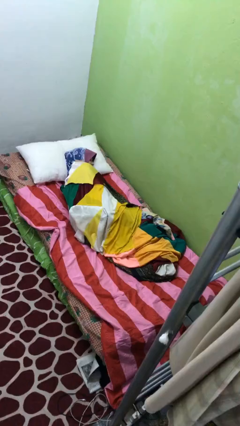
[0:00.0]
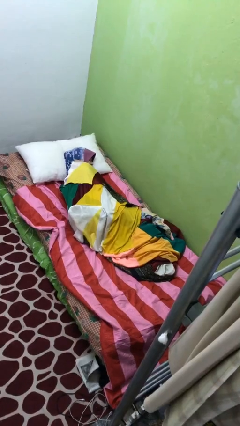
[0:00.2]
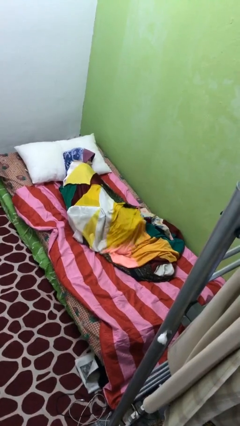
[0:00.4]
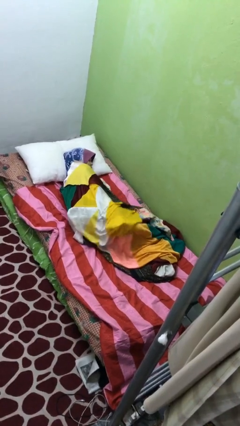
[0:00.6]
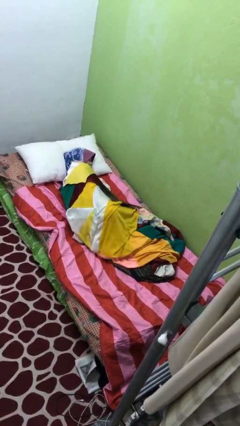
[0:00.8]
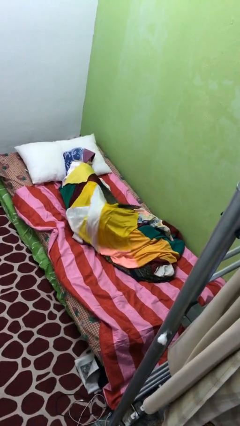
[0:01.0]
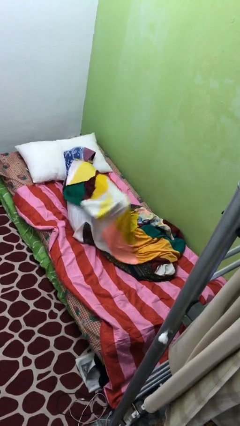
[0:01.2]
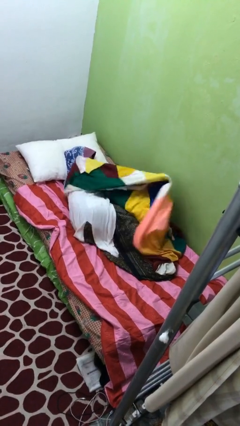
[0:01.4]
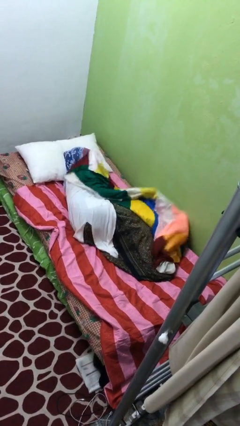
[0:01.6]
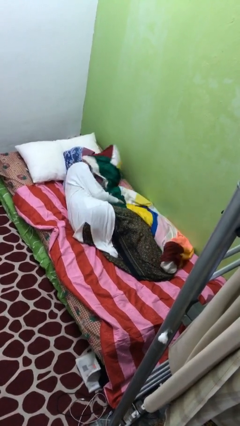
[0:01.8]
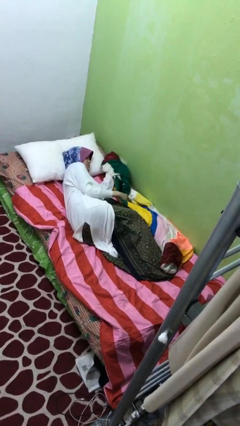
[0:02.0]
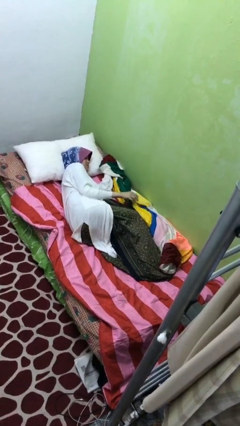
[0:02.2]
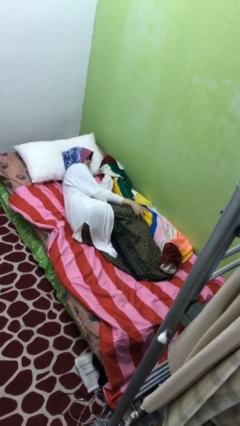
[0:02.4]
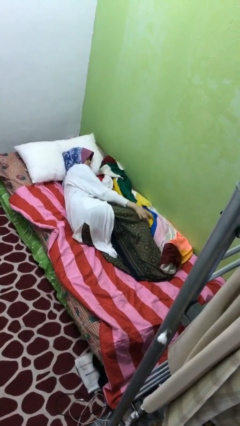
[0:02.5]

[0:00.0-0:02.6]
person uncovers with blanket

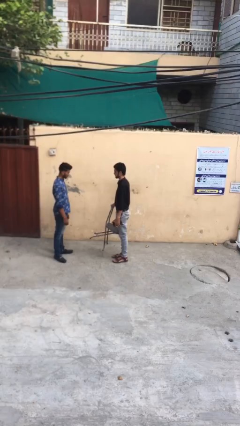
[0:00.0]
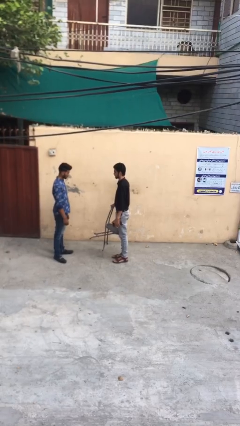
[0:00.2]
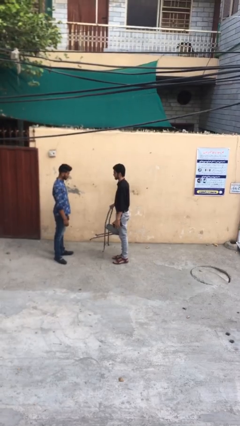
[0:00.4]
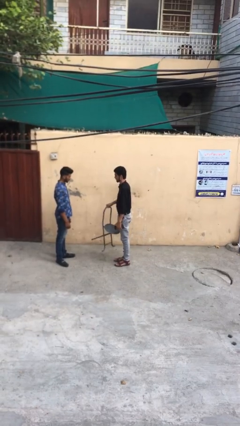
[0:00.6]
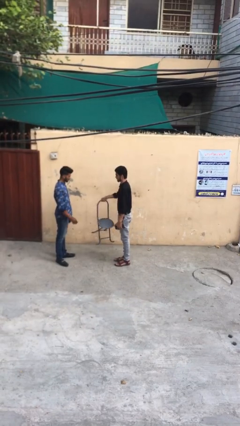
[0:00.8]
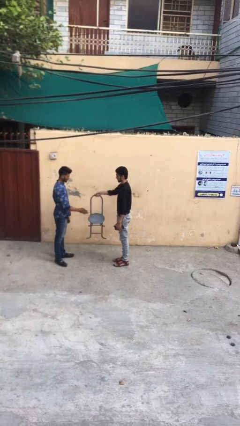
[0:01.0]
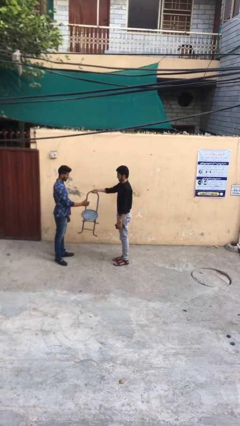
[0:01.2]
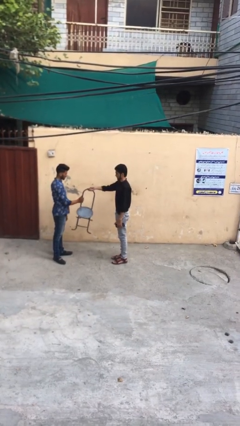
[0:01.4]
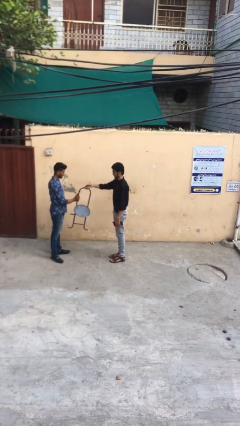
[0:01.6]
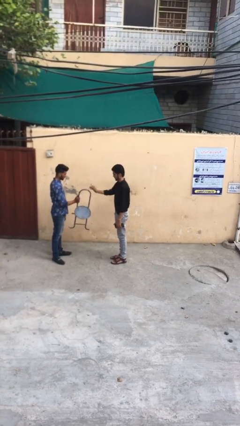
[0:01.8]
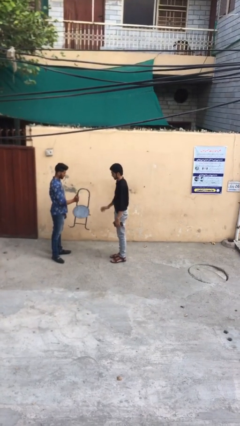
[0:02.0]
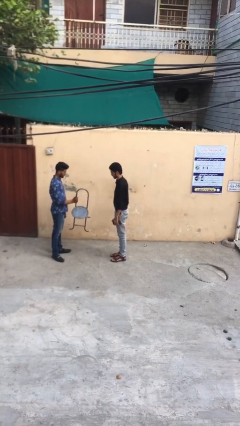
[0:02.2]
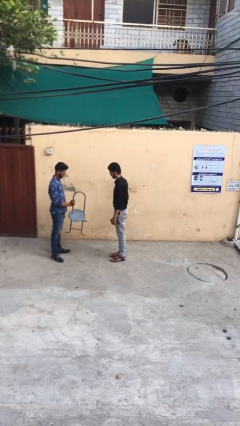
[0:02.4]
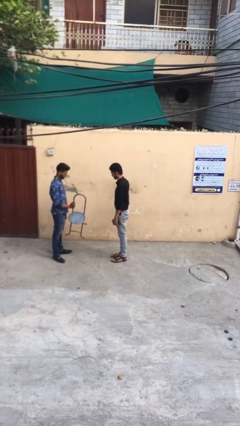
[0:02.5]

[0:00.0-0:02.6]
person transfers object to person

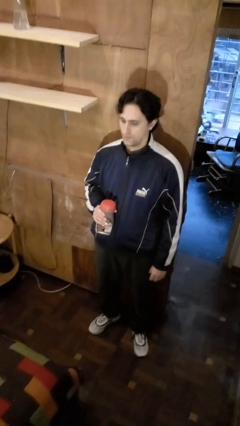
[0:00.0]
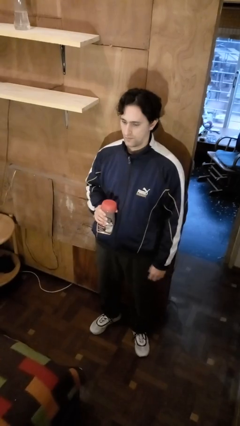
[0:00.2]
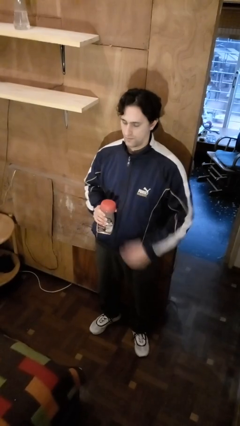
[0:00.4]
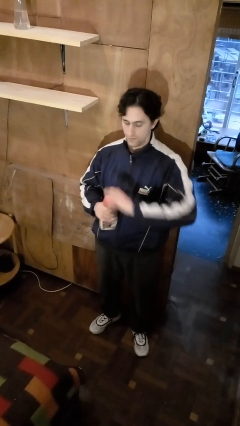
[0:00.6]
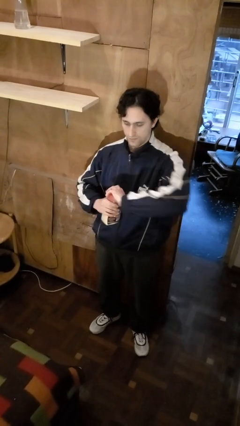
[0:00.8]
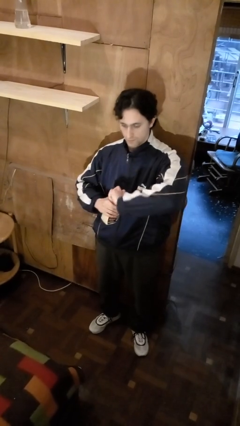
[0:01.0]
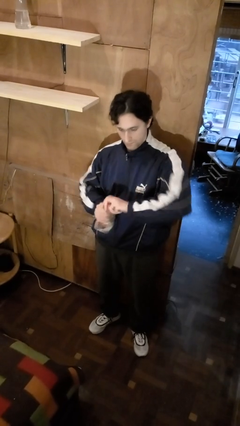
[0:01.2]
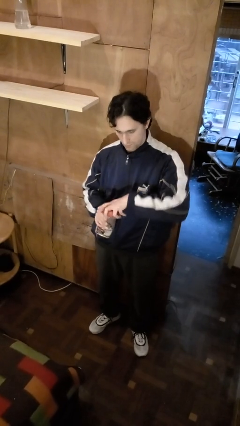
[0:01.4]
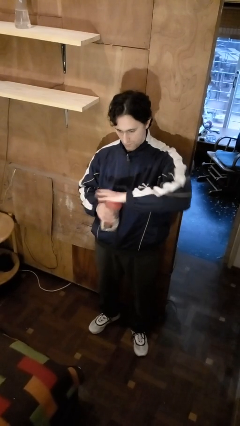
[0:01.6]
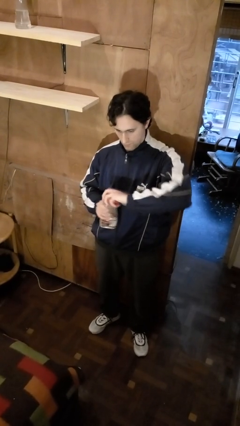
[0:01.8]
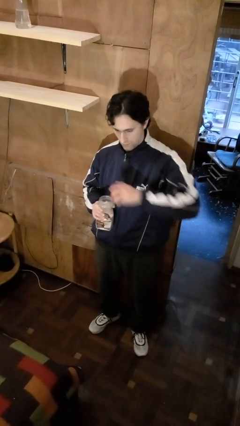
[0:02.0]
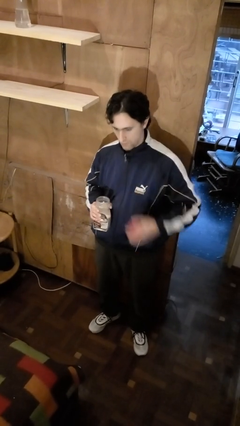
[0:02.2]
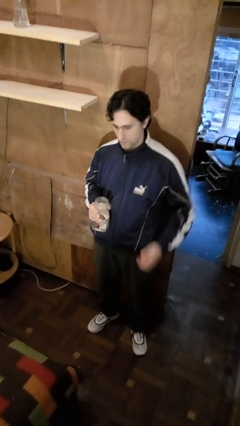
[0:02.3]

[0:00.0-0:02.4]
person opens jar

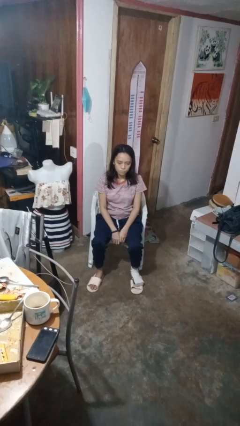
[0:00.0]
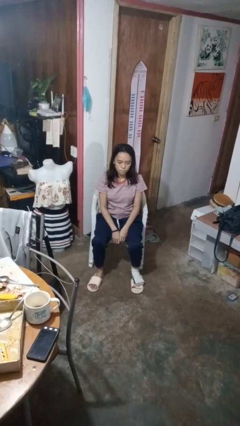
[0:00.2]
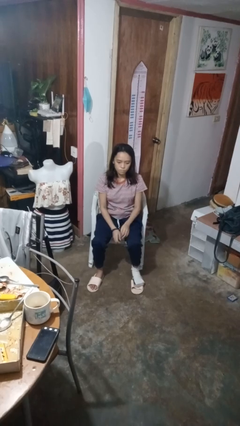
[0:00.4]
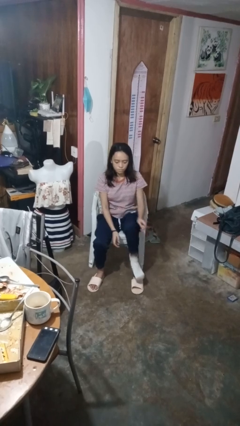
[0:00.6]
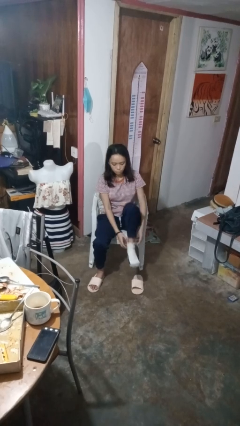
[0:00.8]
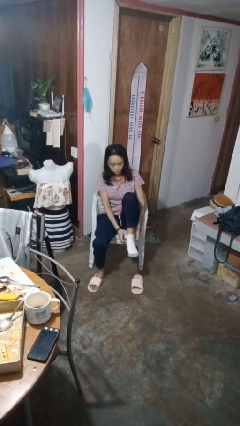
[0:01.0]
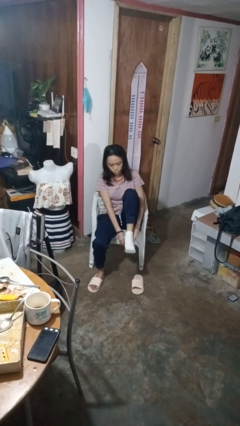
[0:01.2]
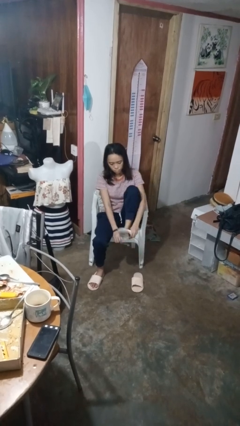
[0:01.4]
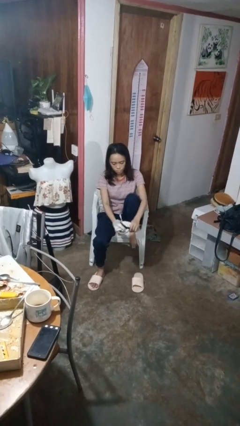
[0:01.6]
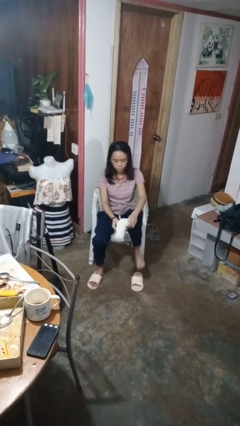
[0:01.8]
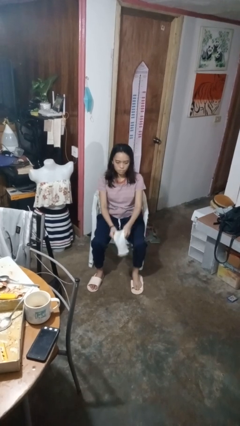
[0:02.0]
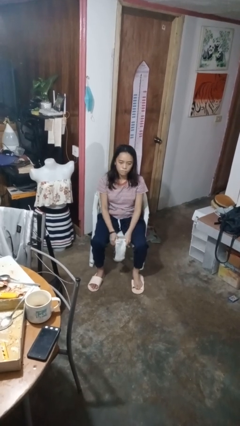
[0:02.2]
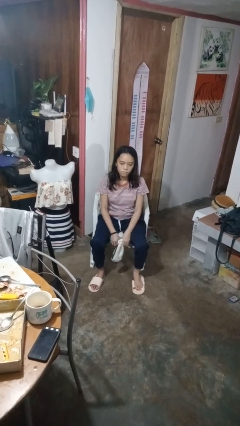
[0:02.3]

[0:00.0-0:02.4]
person takes off socks

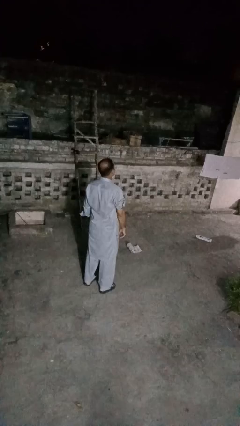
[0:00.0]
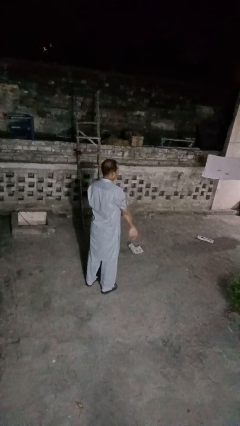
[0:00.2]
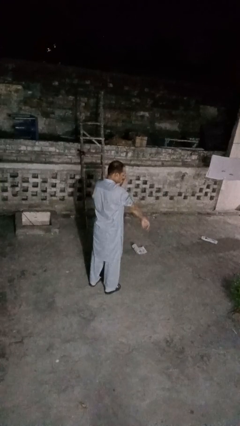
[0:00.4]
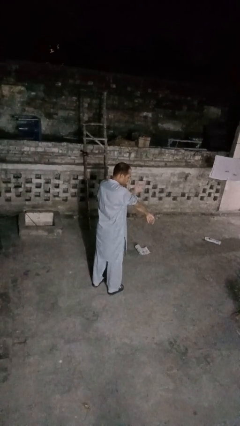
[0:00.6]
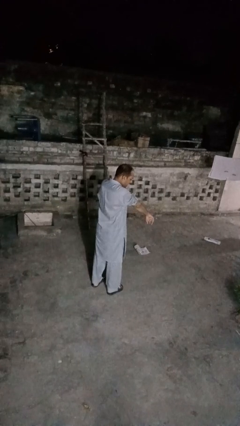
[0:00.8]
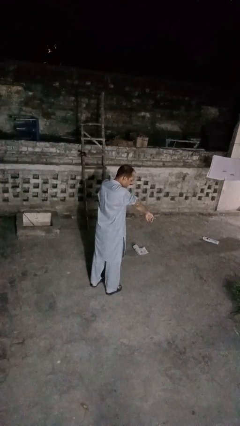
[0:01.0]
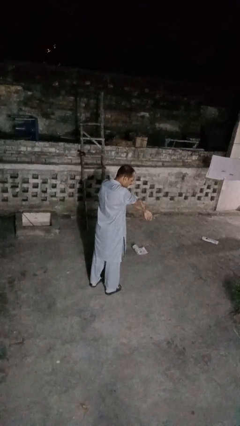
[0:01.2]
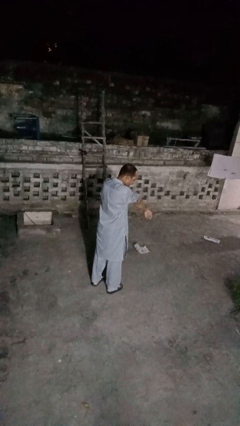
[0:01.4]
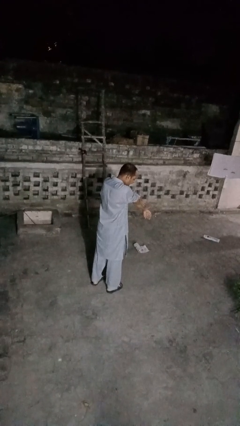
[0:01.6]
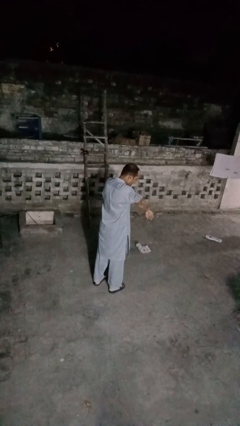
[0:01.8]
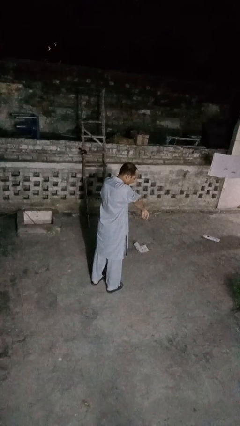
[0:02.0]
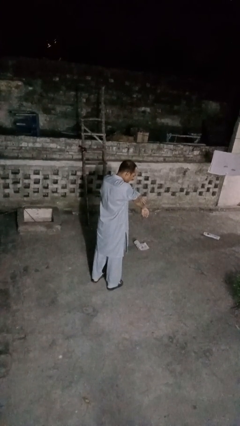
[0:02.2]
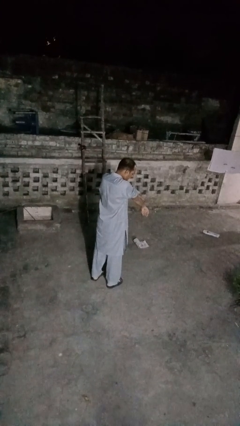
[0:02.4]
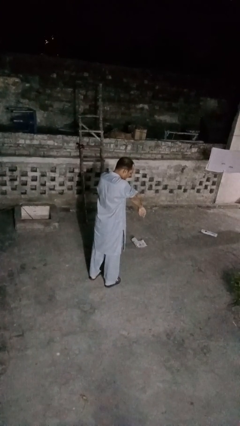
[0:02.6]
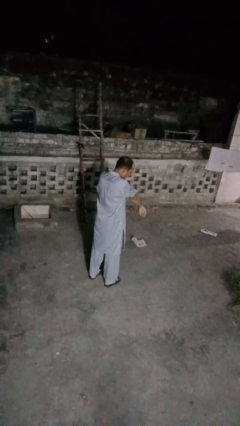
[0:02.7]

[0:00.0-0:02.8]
person swats bug

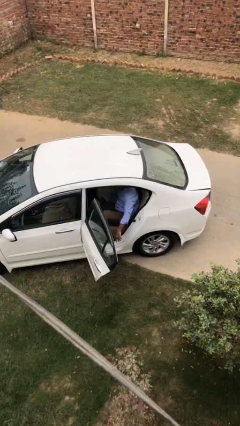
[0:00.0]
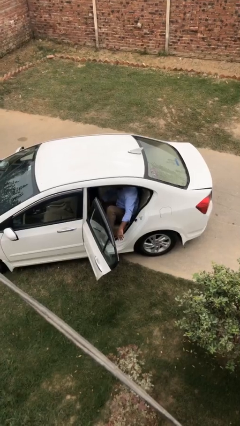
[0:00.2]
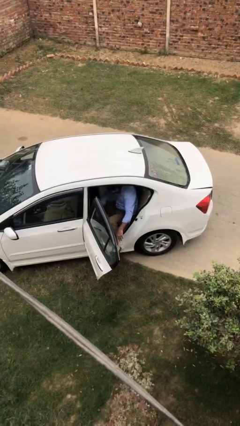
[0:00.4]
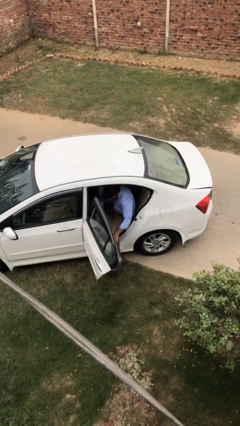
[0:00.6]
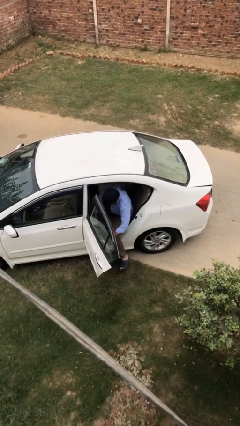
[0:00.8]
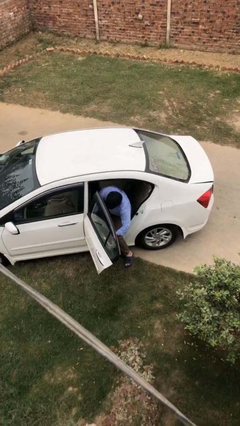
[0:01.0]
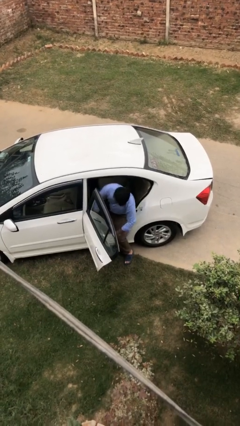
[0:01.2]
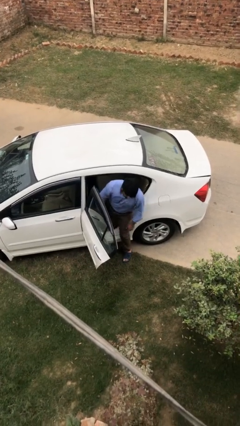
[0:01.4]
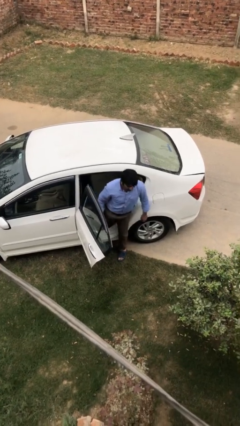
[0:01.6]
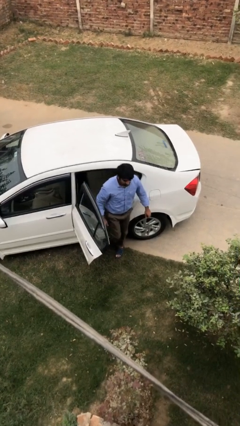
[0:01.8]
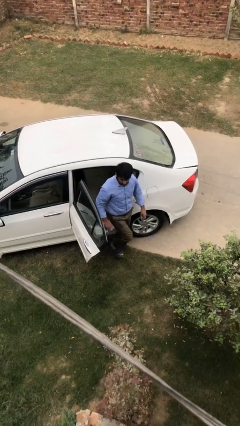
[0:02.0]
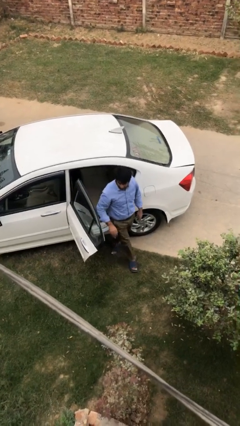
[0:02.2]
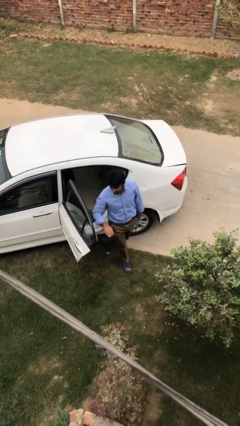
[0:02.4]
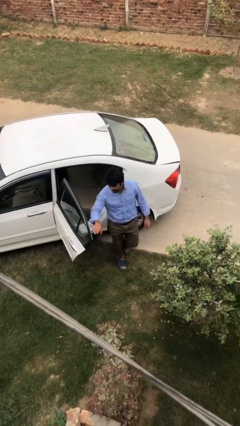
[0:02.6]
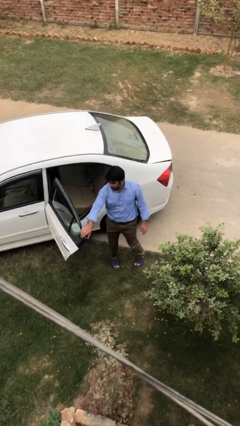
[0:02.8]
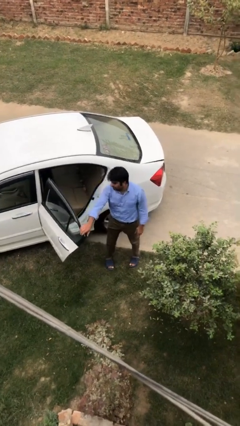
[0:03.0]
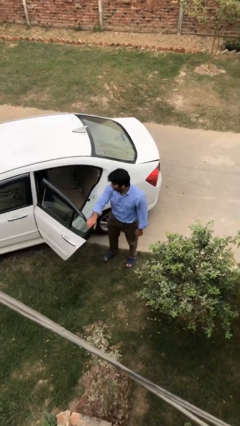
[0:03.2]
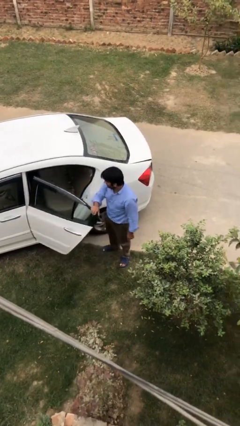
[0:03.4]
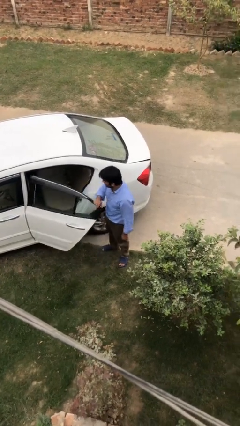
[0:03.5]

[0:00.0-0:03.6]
person exits car

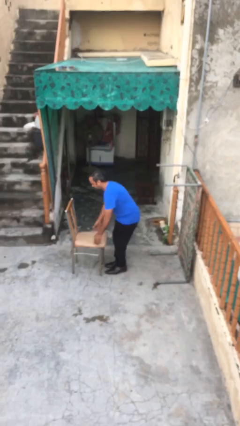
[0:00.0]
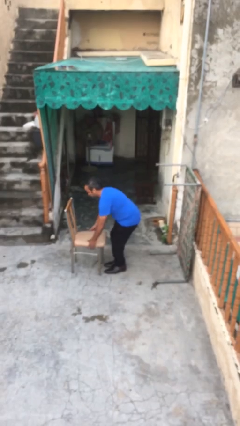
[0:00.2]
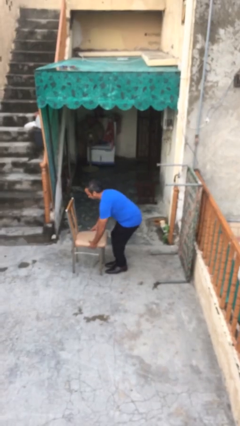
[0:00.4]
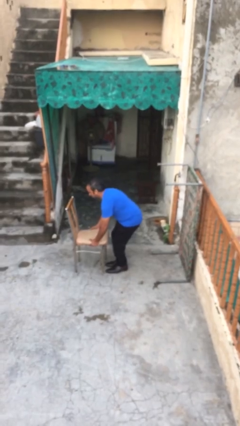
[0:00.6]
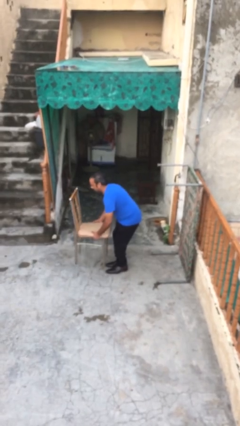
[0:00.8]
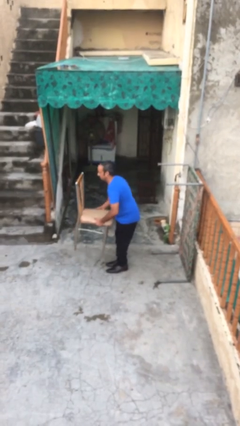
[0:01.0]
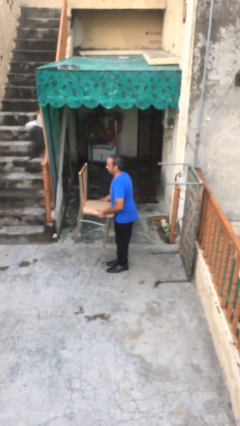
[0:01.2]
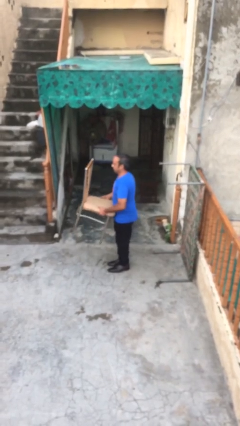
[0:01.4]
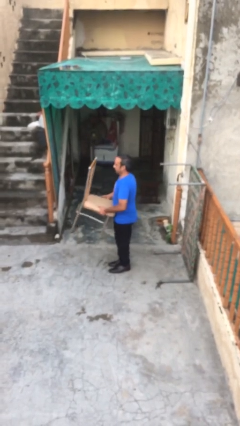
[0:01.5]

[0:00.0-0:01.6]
person picks up object from floor
